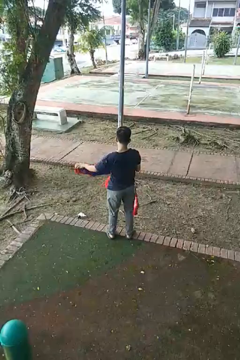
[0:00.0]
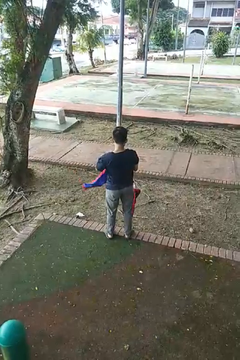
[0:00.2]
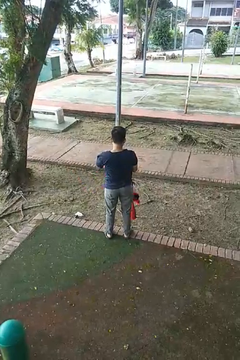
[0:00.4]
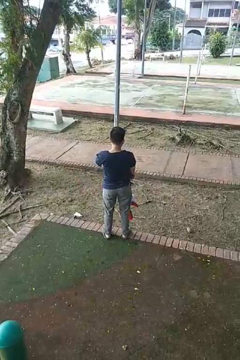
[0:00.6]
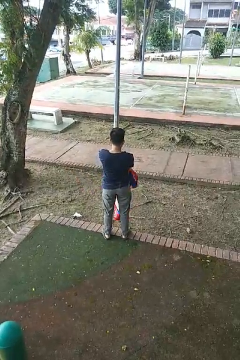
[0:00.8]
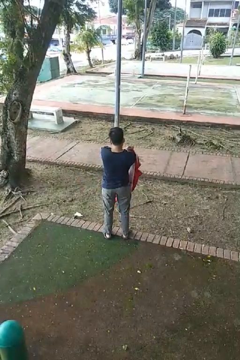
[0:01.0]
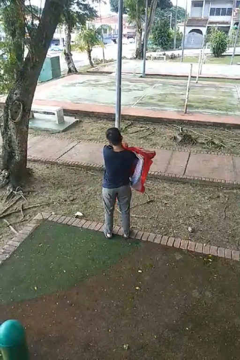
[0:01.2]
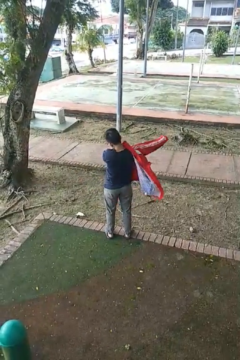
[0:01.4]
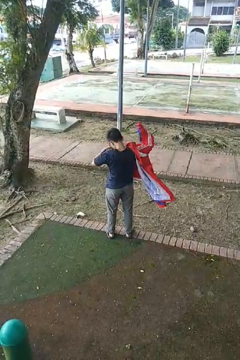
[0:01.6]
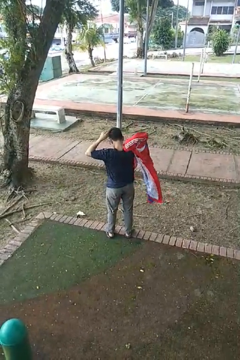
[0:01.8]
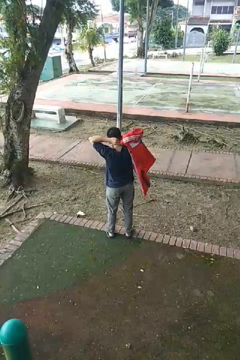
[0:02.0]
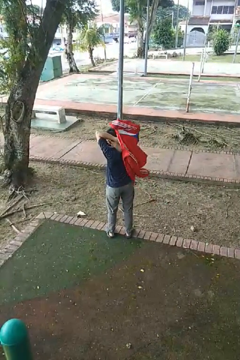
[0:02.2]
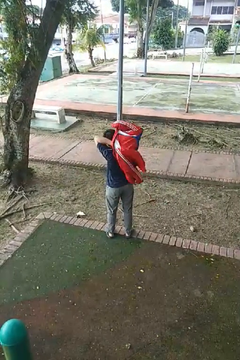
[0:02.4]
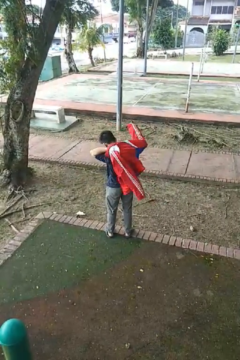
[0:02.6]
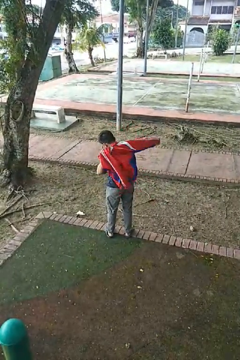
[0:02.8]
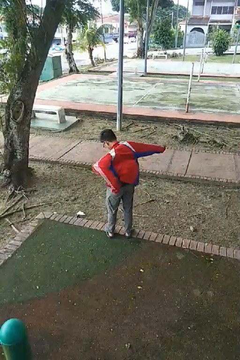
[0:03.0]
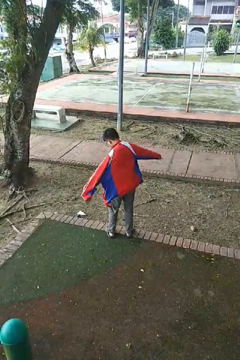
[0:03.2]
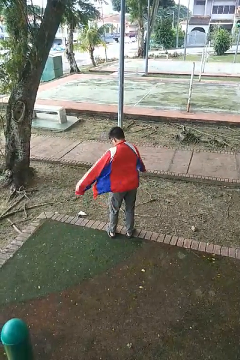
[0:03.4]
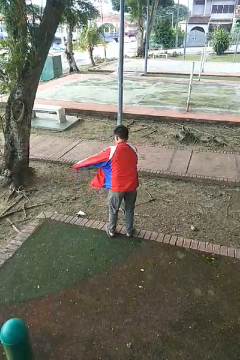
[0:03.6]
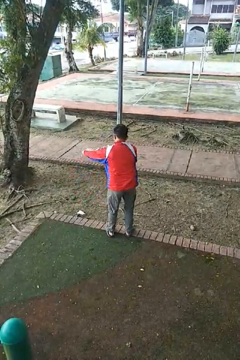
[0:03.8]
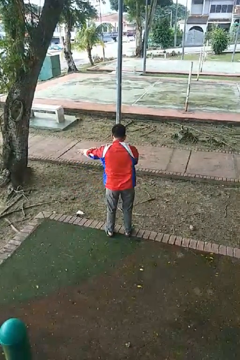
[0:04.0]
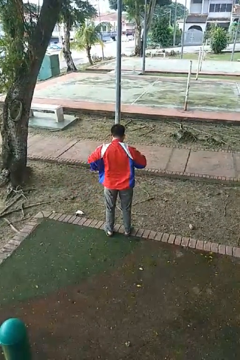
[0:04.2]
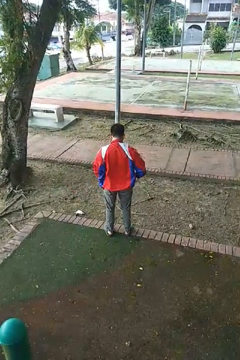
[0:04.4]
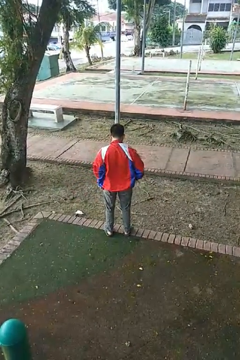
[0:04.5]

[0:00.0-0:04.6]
person puts on jacket

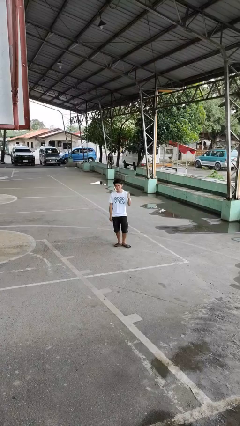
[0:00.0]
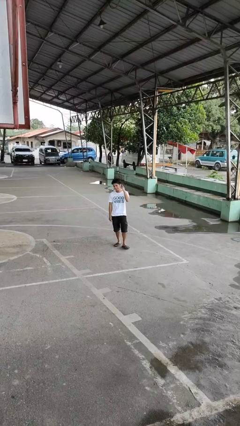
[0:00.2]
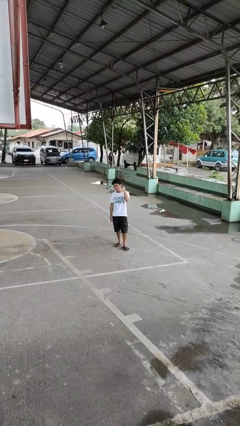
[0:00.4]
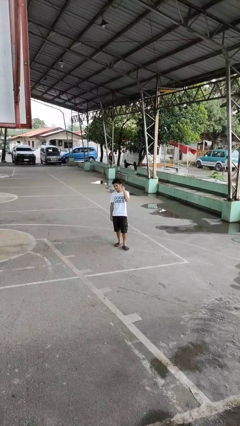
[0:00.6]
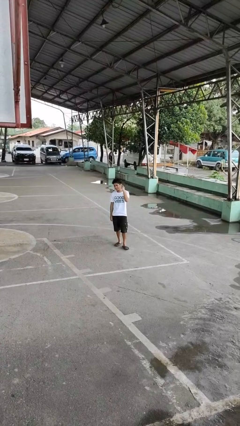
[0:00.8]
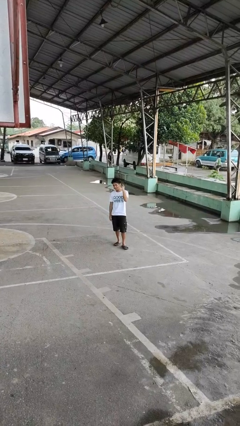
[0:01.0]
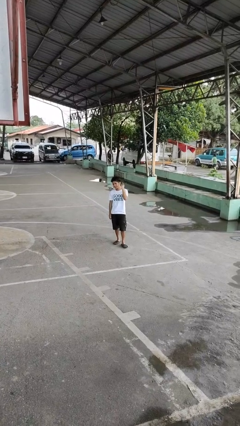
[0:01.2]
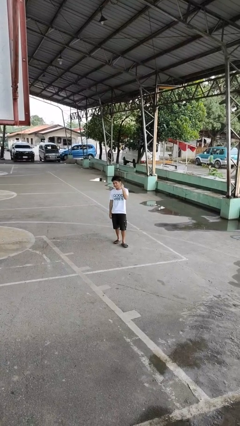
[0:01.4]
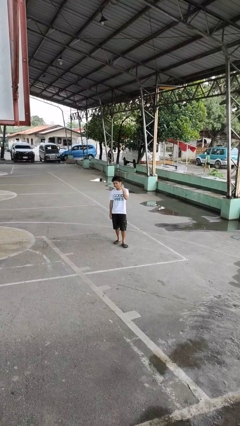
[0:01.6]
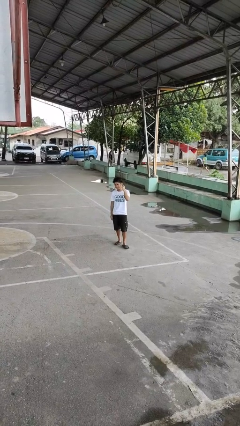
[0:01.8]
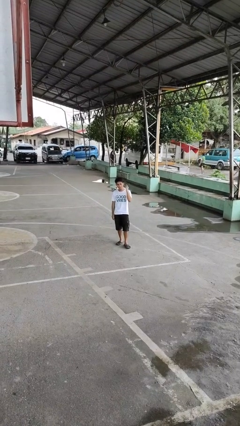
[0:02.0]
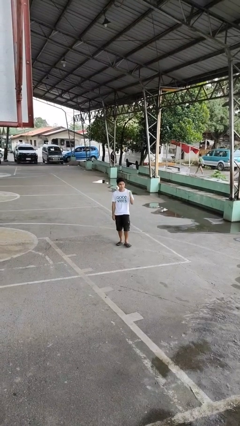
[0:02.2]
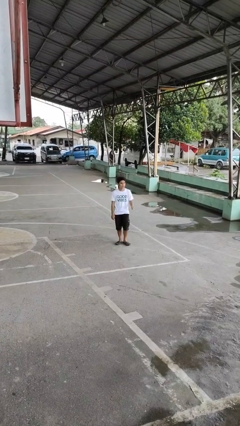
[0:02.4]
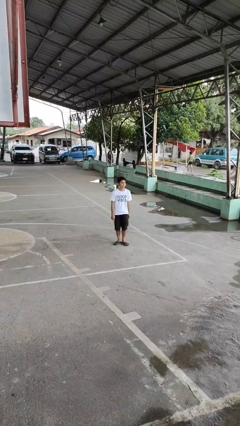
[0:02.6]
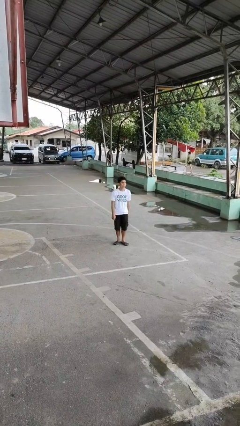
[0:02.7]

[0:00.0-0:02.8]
person gestures listen closely

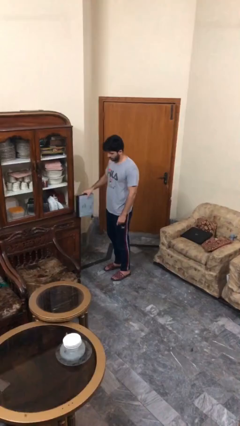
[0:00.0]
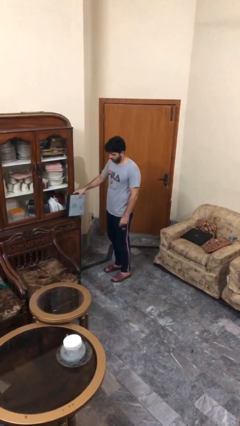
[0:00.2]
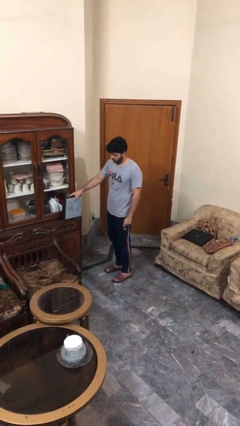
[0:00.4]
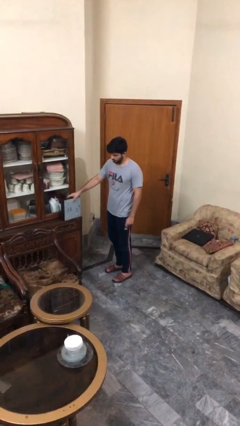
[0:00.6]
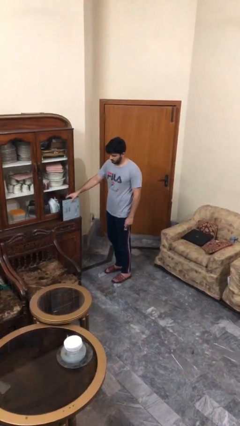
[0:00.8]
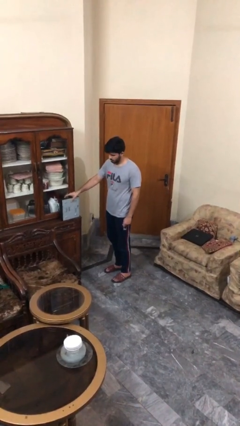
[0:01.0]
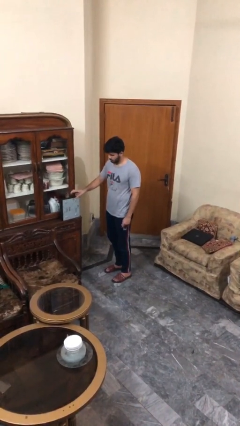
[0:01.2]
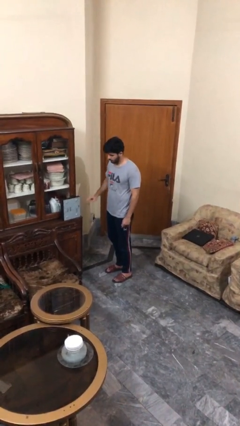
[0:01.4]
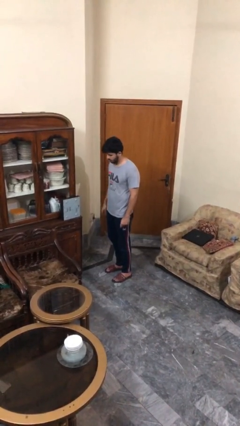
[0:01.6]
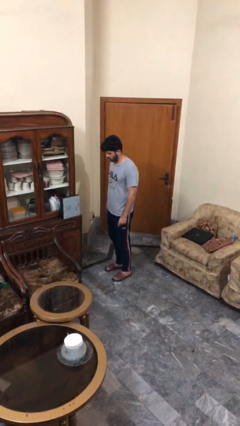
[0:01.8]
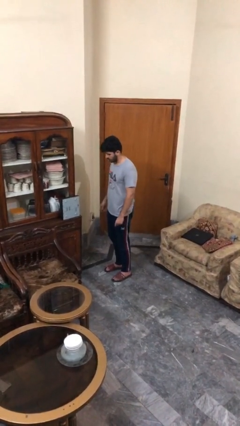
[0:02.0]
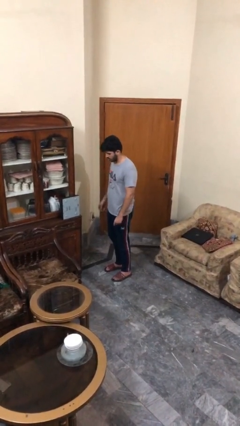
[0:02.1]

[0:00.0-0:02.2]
person puts down object on countertop

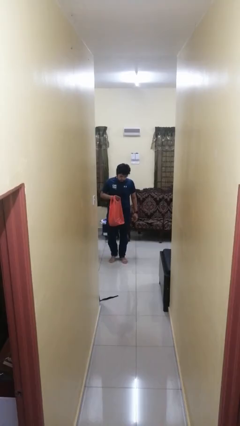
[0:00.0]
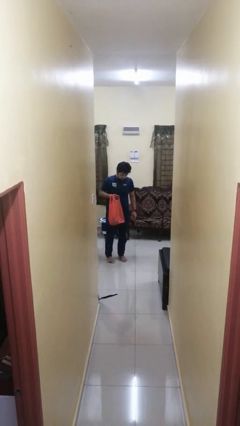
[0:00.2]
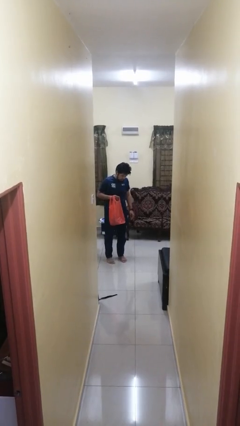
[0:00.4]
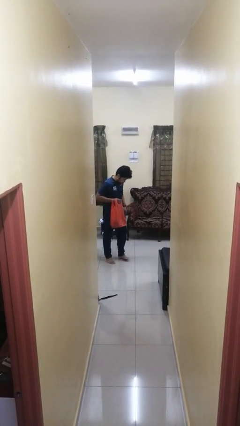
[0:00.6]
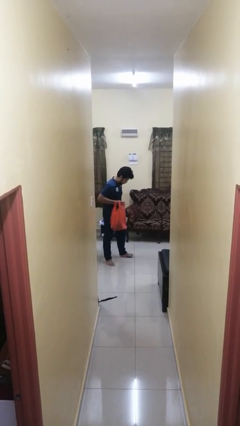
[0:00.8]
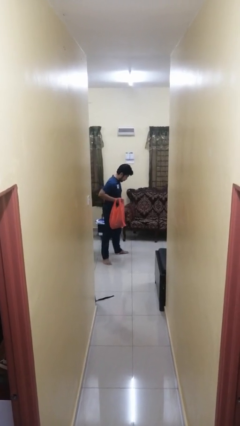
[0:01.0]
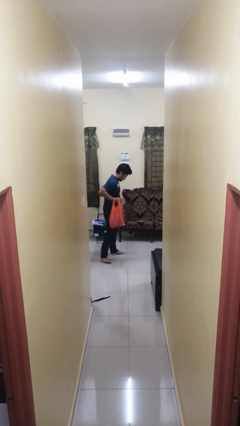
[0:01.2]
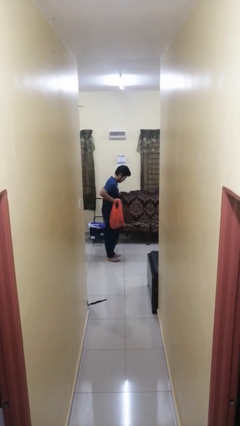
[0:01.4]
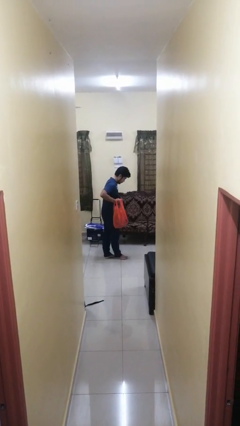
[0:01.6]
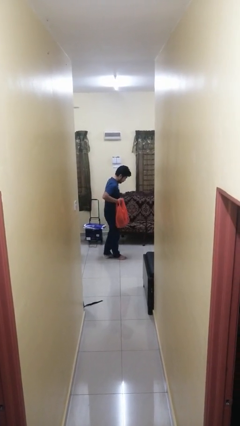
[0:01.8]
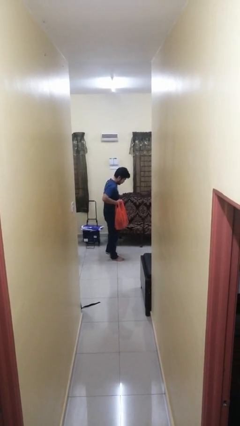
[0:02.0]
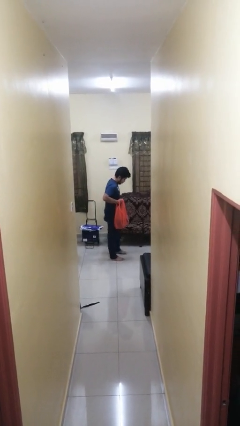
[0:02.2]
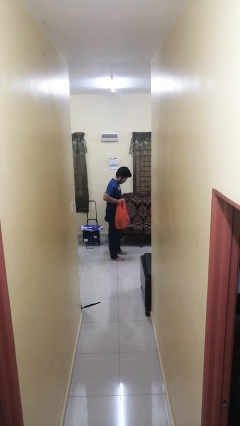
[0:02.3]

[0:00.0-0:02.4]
person carries groceries

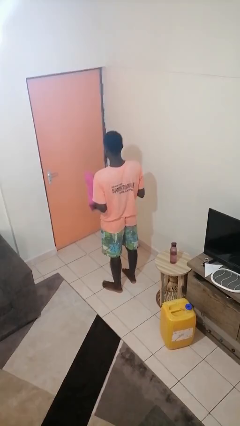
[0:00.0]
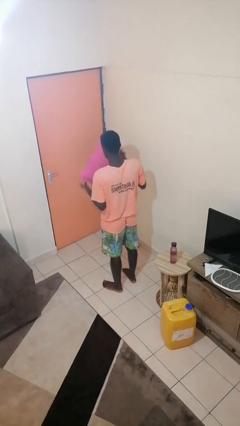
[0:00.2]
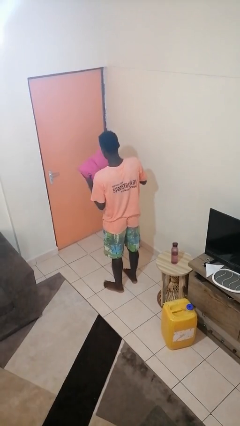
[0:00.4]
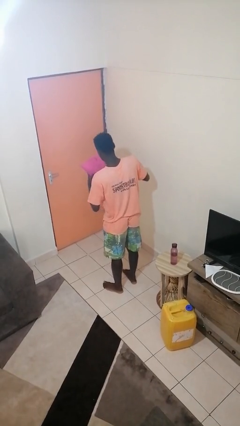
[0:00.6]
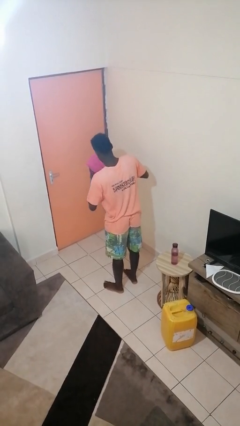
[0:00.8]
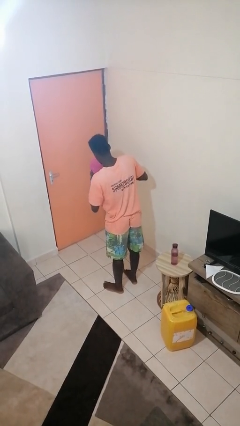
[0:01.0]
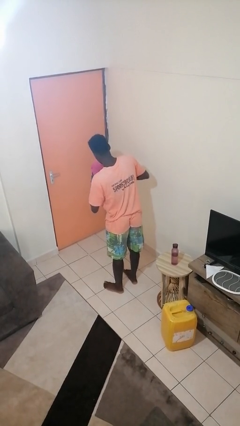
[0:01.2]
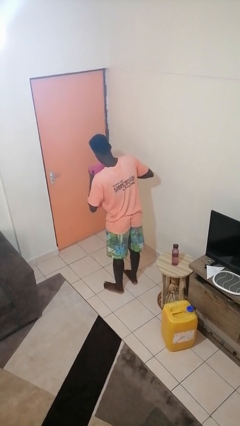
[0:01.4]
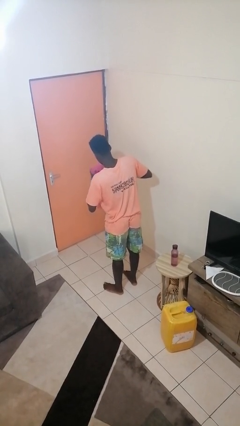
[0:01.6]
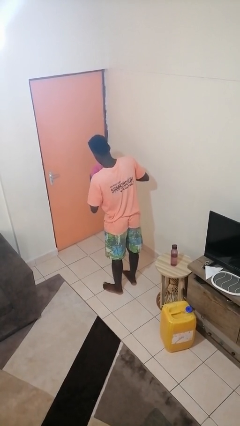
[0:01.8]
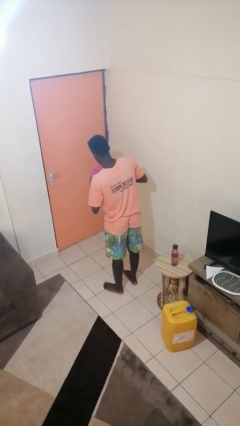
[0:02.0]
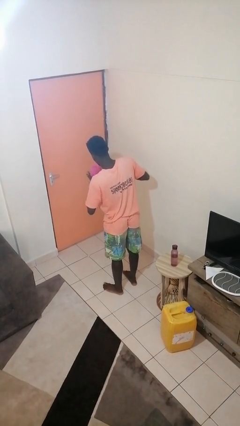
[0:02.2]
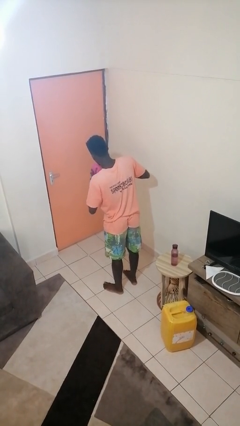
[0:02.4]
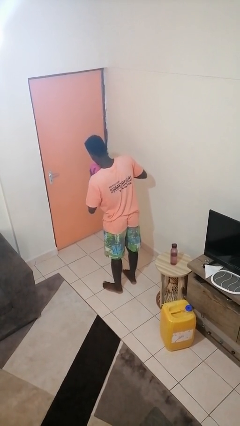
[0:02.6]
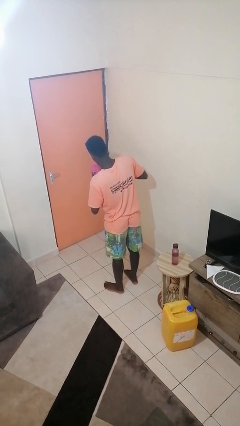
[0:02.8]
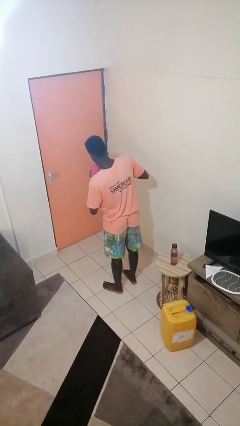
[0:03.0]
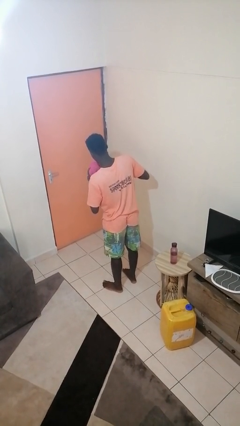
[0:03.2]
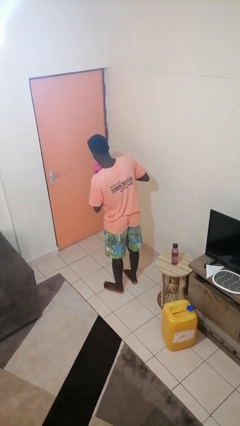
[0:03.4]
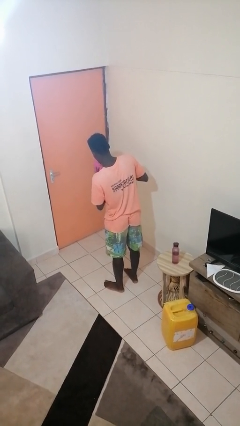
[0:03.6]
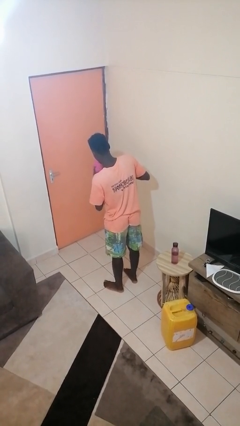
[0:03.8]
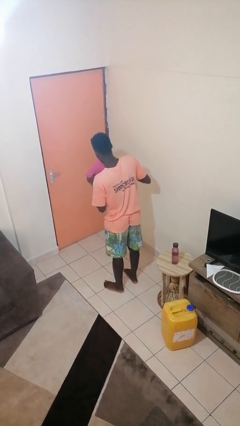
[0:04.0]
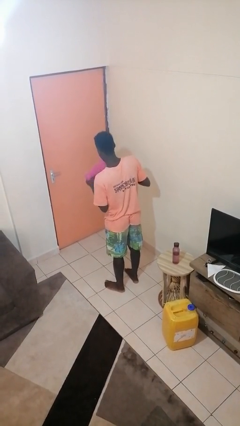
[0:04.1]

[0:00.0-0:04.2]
person squeezes object

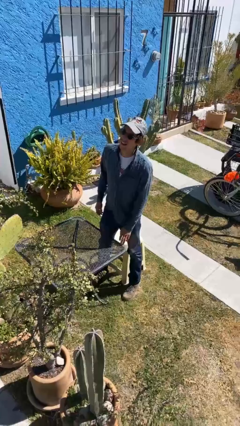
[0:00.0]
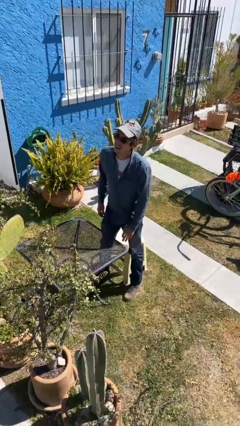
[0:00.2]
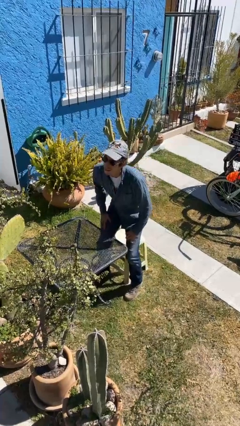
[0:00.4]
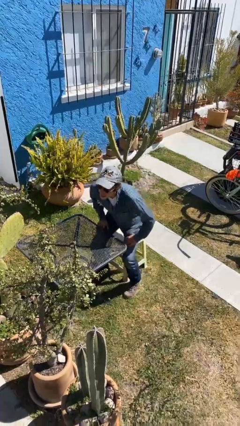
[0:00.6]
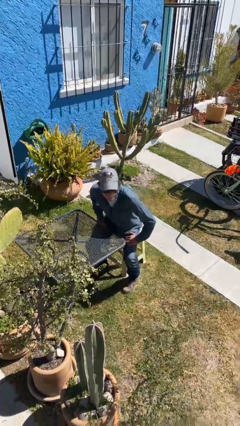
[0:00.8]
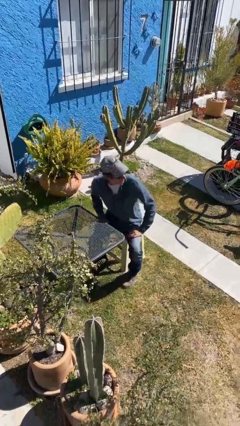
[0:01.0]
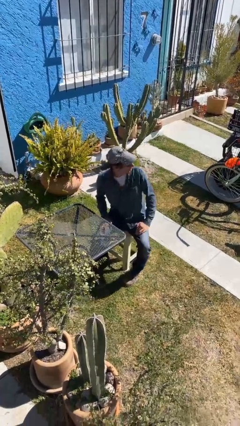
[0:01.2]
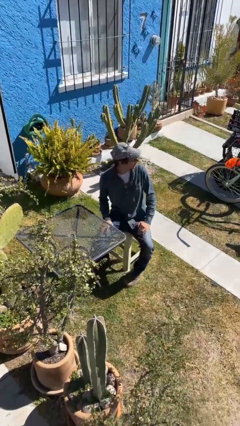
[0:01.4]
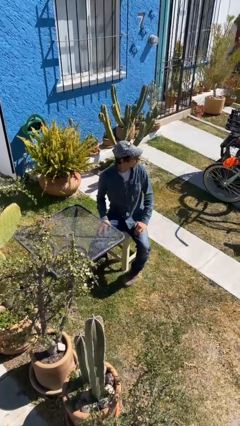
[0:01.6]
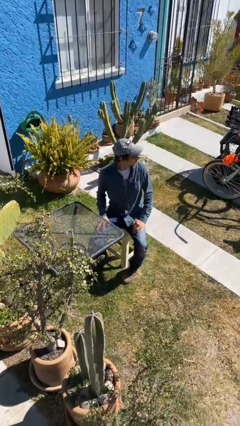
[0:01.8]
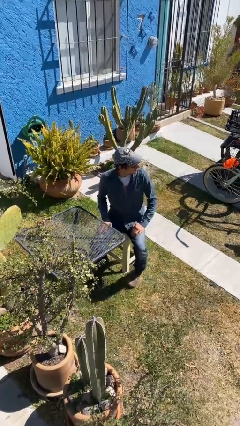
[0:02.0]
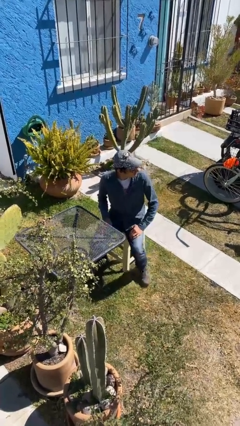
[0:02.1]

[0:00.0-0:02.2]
person sits down
